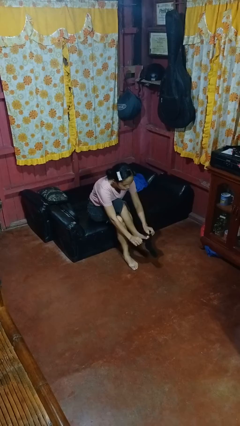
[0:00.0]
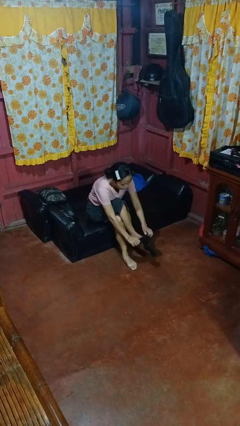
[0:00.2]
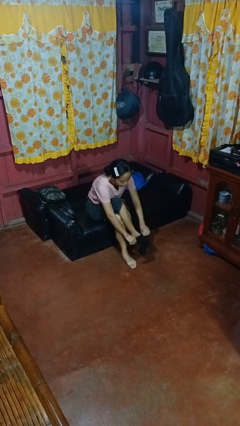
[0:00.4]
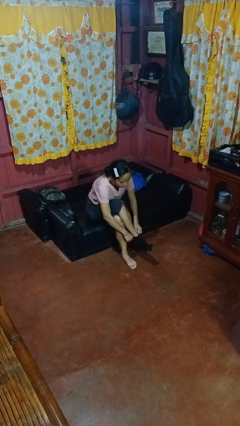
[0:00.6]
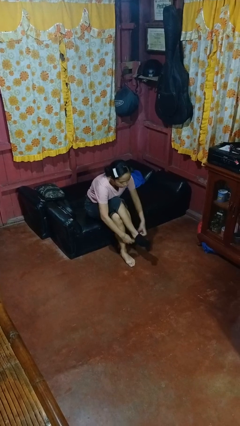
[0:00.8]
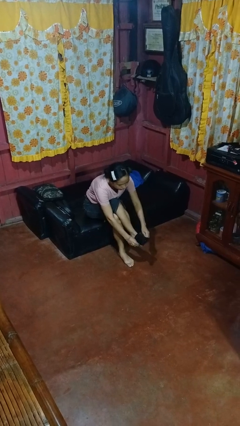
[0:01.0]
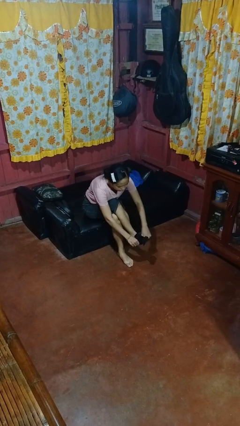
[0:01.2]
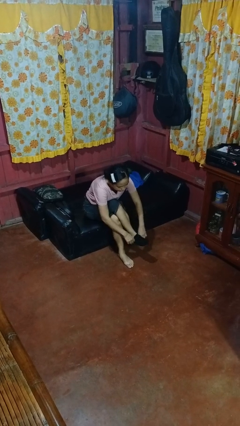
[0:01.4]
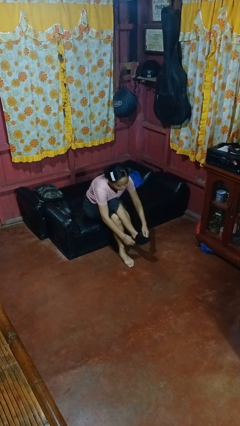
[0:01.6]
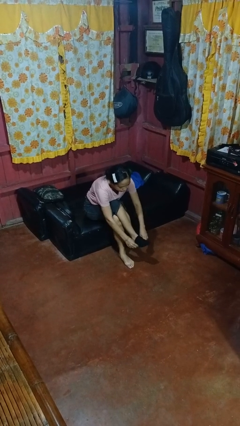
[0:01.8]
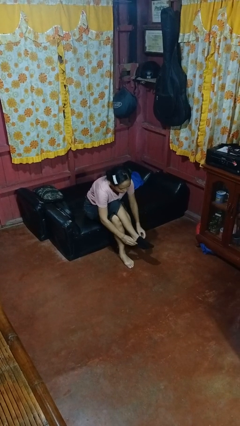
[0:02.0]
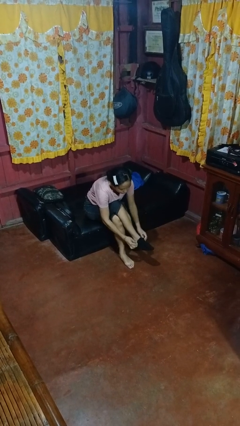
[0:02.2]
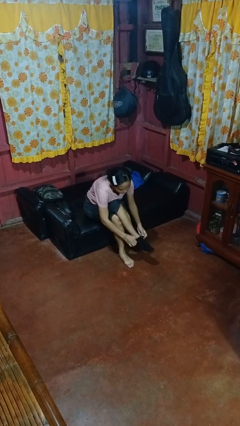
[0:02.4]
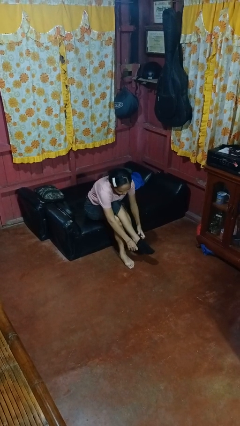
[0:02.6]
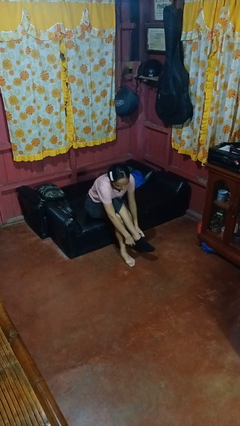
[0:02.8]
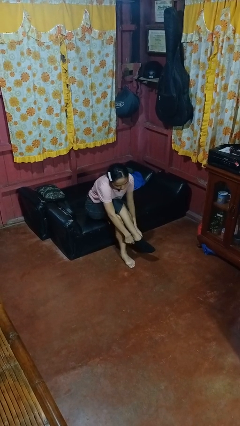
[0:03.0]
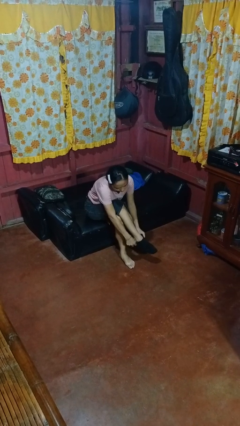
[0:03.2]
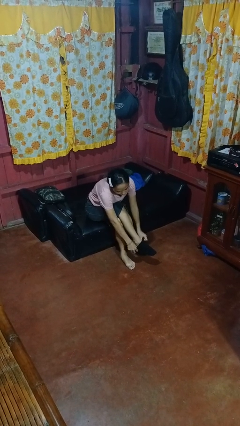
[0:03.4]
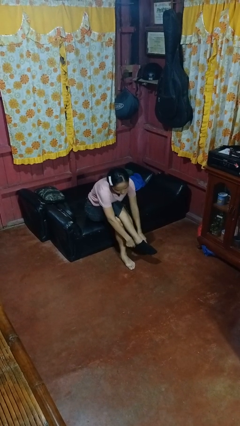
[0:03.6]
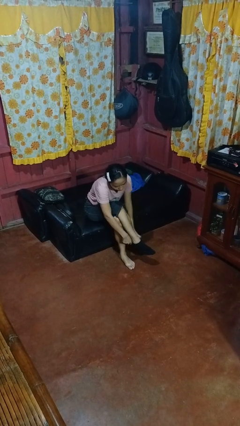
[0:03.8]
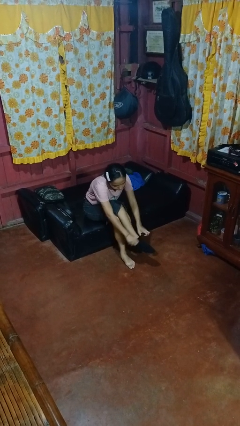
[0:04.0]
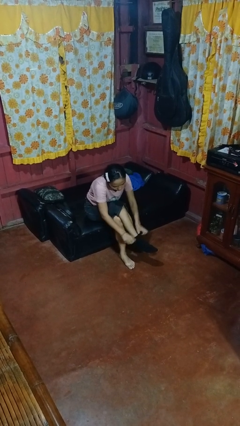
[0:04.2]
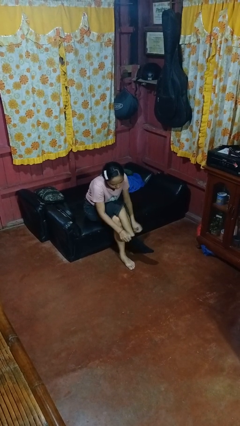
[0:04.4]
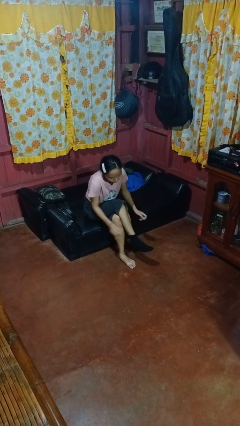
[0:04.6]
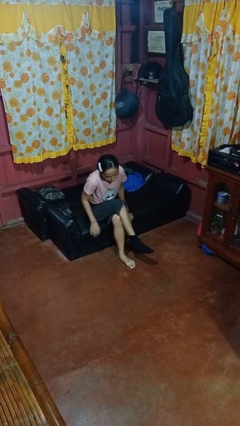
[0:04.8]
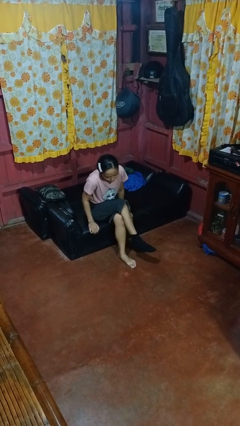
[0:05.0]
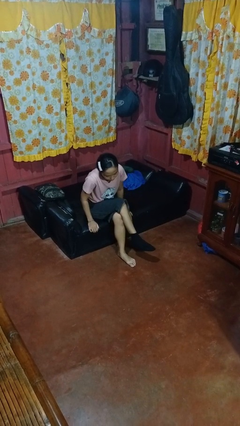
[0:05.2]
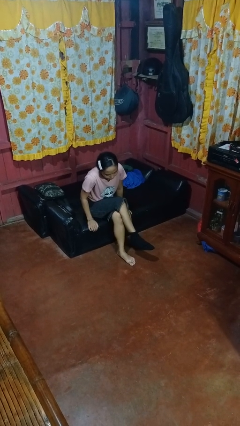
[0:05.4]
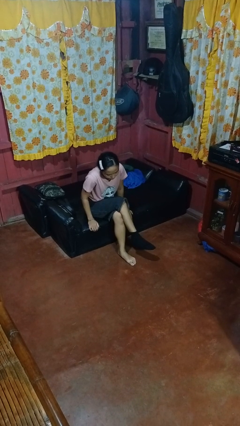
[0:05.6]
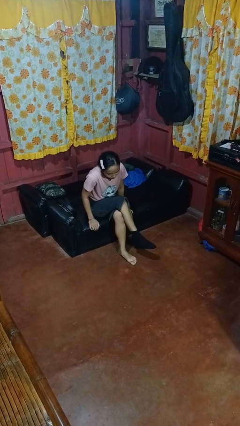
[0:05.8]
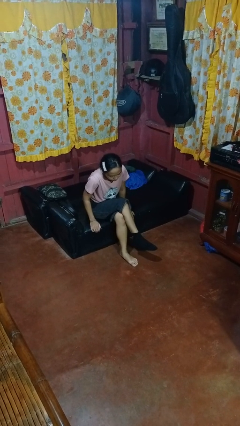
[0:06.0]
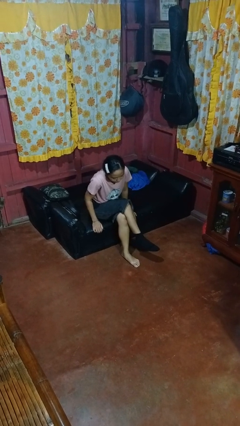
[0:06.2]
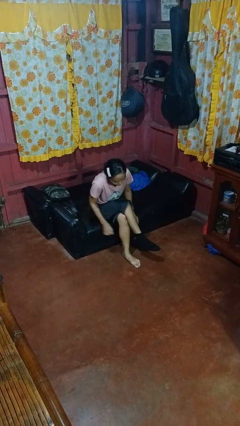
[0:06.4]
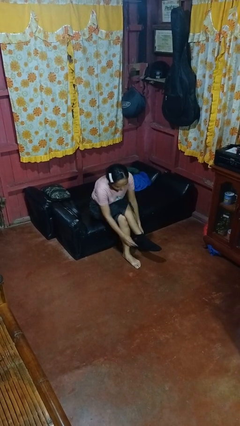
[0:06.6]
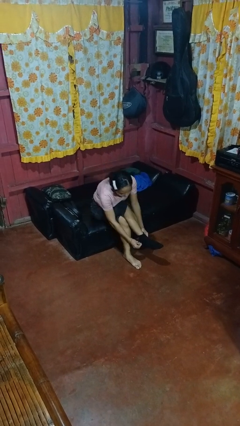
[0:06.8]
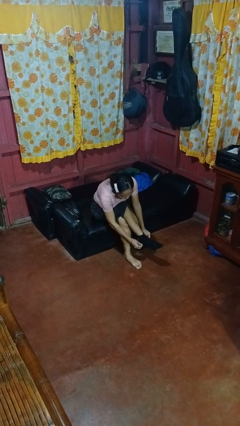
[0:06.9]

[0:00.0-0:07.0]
person puts on socks

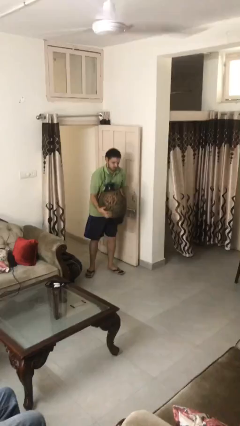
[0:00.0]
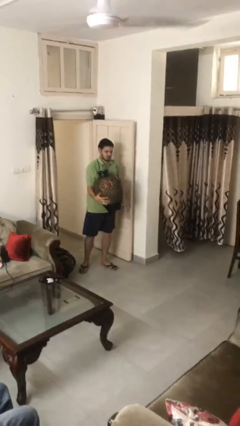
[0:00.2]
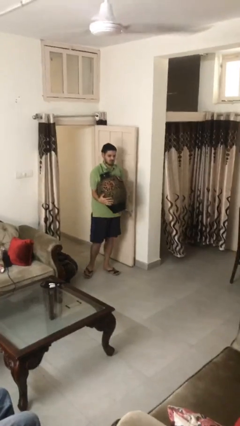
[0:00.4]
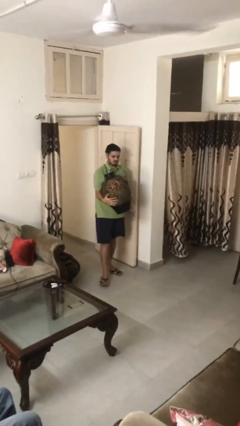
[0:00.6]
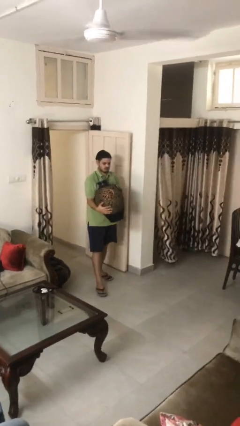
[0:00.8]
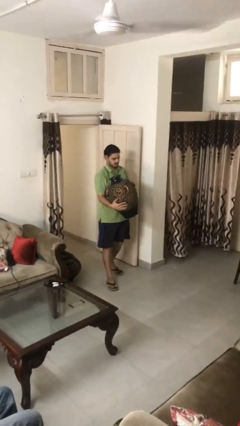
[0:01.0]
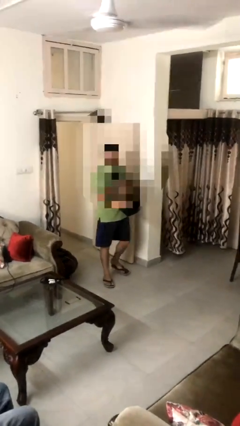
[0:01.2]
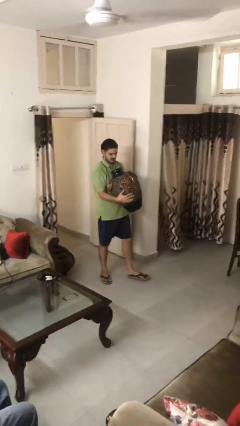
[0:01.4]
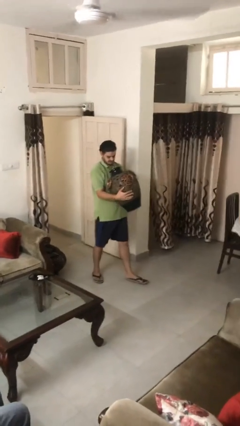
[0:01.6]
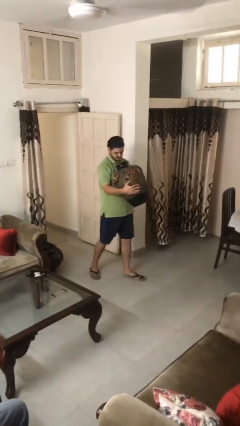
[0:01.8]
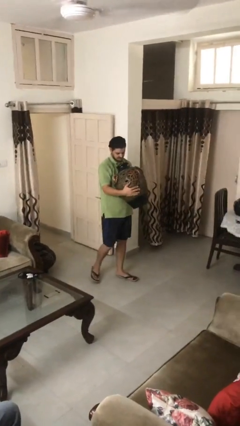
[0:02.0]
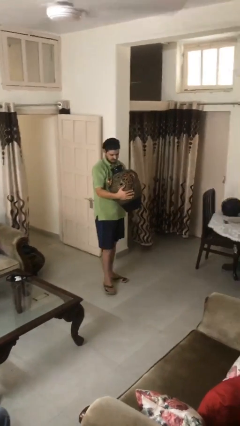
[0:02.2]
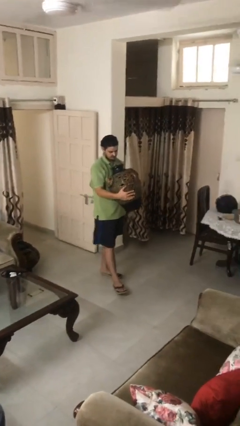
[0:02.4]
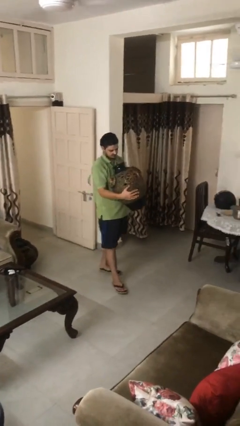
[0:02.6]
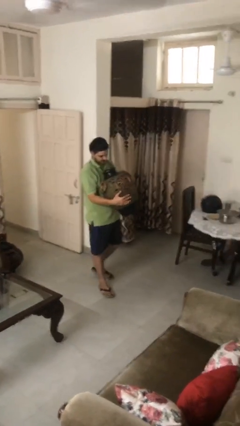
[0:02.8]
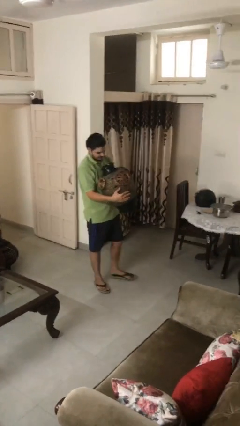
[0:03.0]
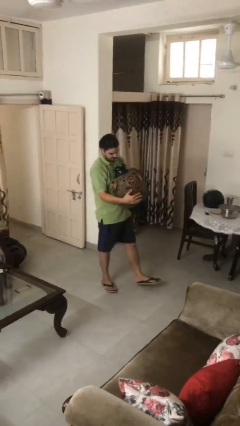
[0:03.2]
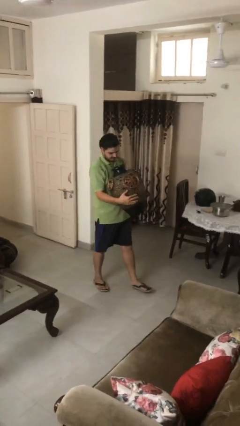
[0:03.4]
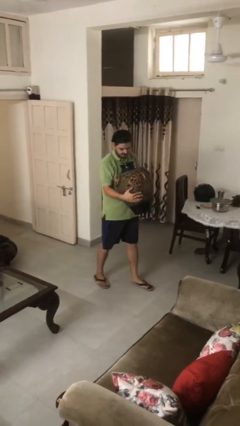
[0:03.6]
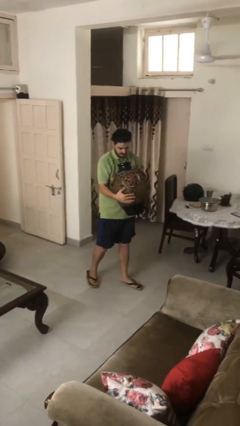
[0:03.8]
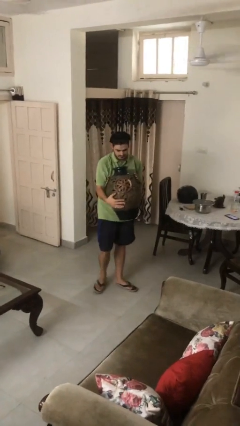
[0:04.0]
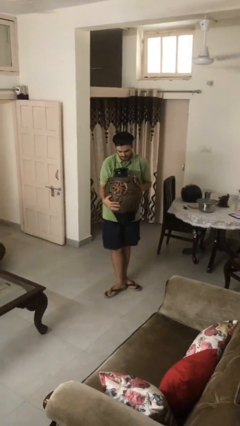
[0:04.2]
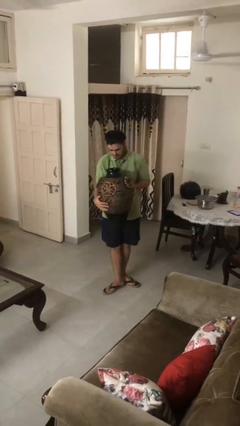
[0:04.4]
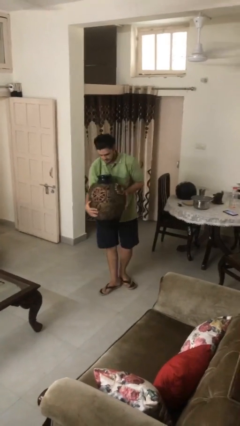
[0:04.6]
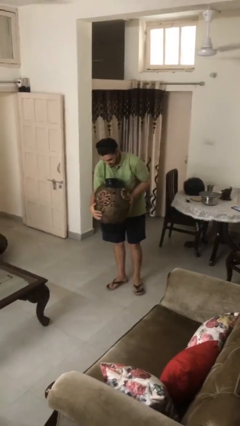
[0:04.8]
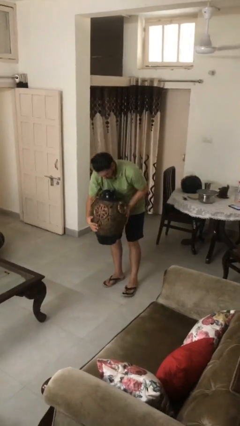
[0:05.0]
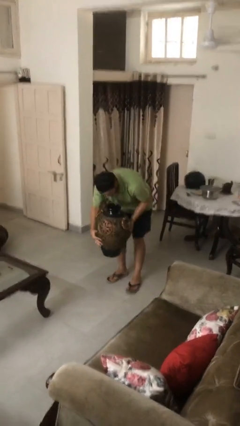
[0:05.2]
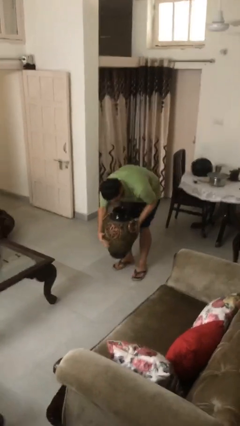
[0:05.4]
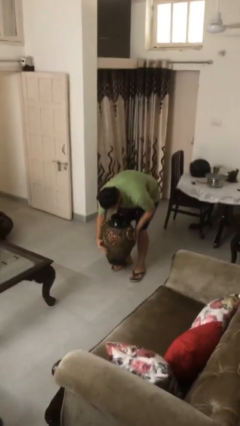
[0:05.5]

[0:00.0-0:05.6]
person carries heavy object

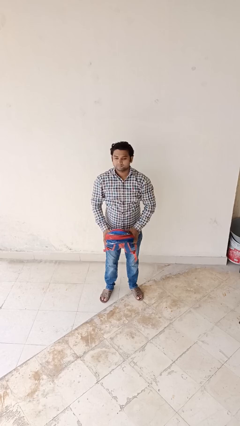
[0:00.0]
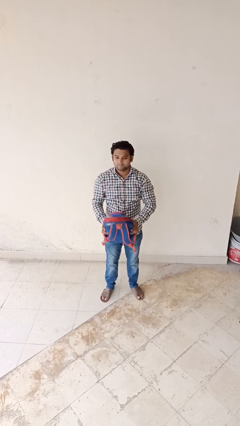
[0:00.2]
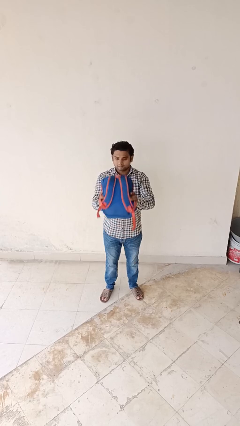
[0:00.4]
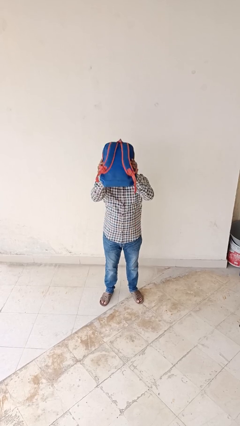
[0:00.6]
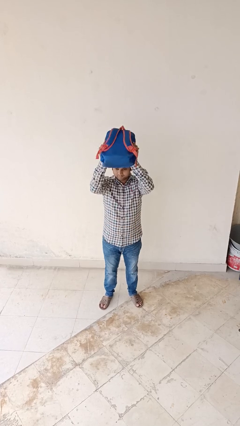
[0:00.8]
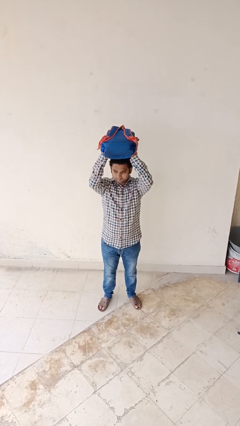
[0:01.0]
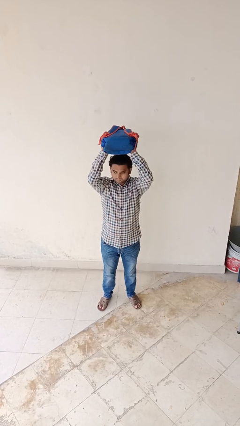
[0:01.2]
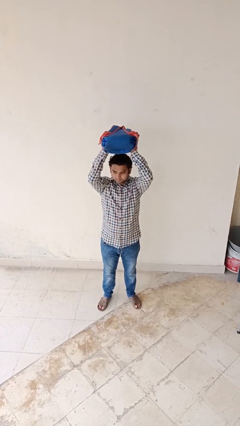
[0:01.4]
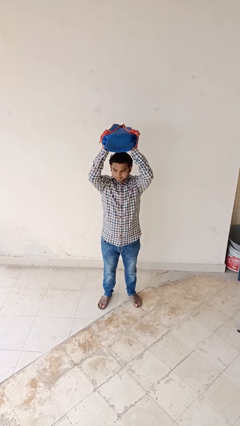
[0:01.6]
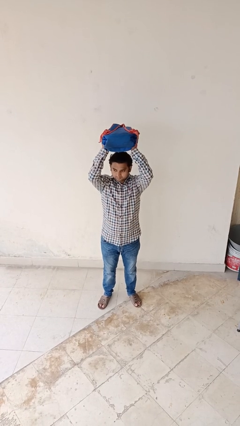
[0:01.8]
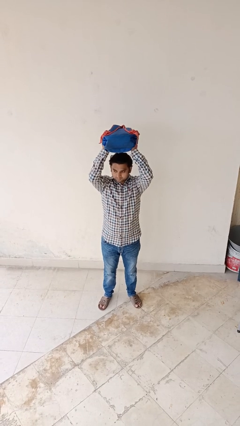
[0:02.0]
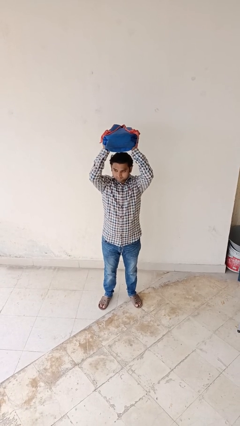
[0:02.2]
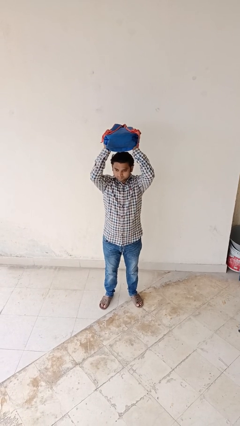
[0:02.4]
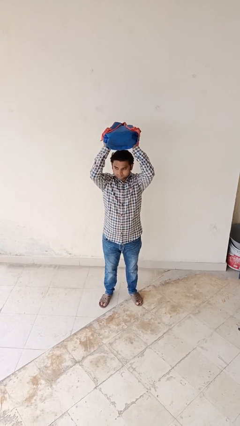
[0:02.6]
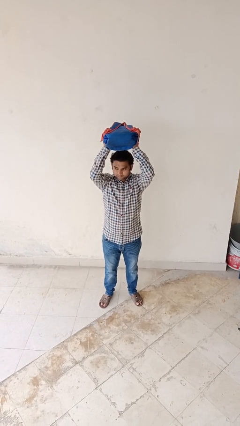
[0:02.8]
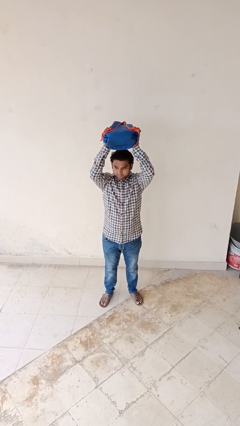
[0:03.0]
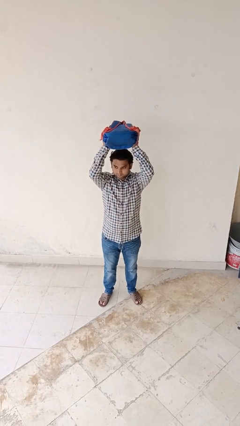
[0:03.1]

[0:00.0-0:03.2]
person holds object above head

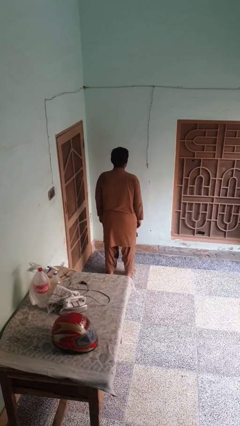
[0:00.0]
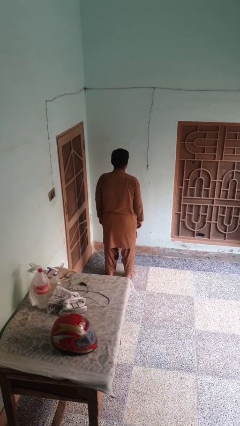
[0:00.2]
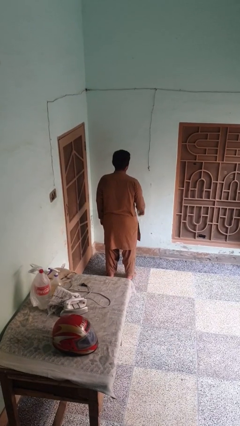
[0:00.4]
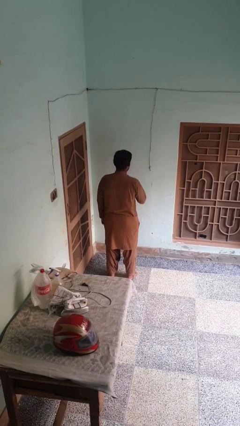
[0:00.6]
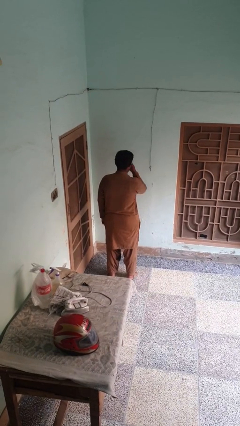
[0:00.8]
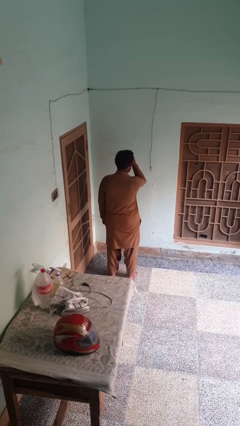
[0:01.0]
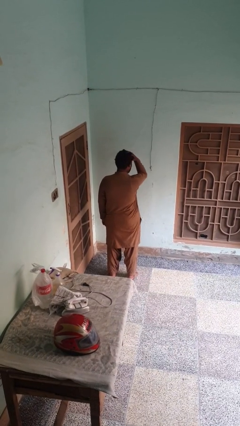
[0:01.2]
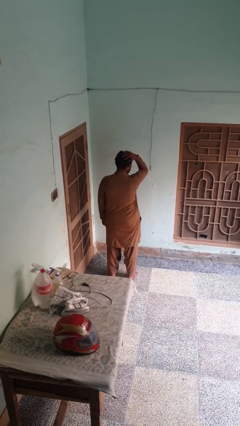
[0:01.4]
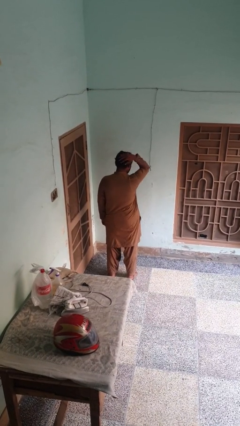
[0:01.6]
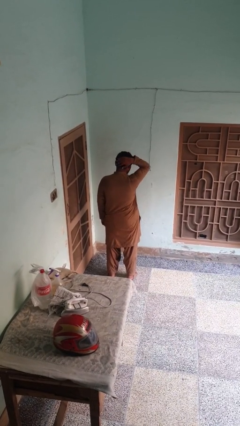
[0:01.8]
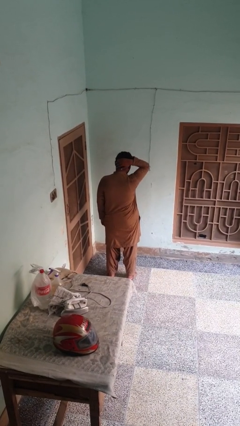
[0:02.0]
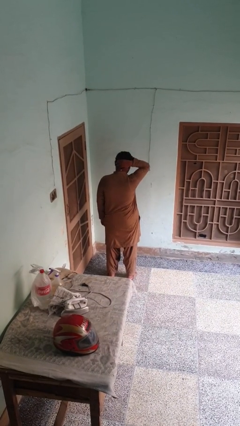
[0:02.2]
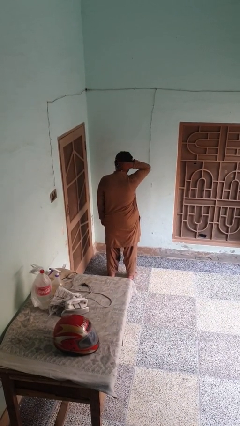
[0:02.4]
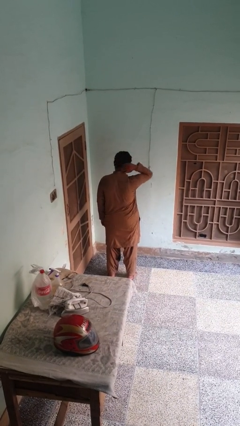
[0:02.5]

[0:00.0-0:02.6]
person strokes hair
